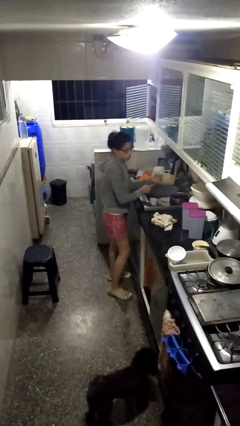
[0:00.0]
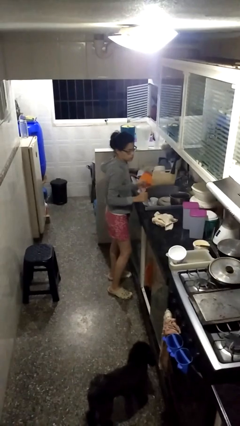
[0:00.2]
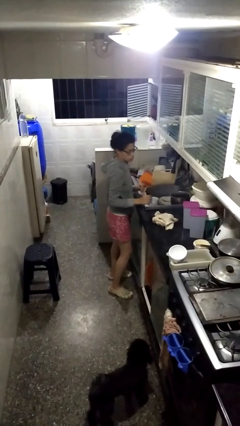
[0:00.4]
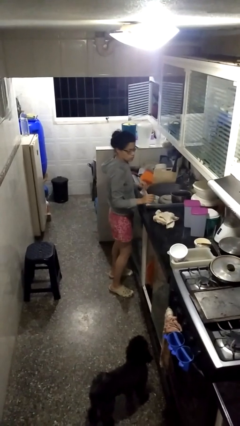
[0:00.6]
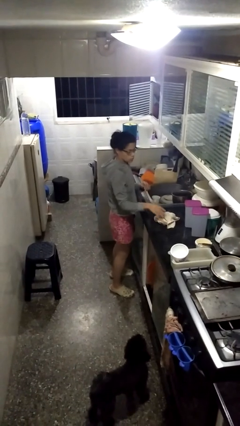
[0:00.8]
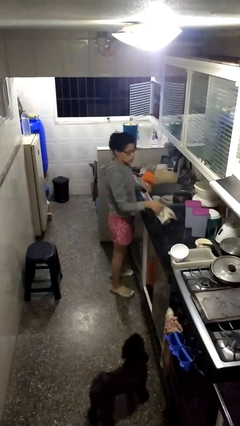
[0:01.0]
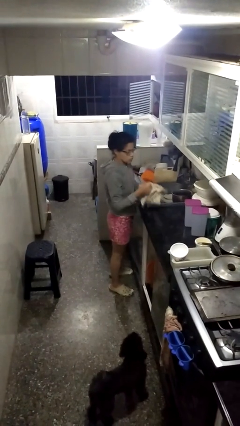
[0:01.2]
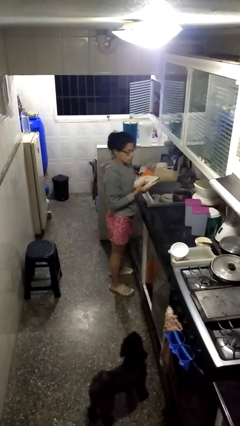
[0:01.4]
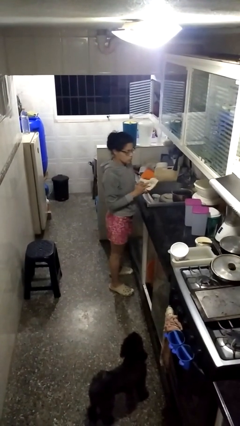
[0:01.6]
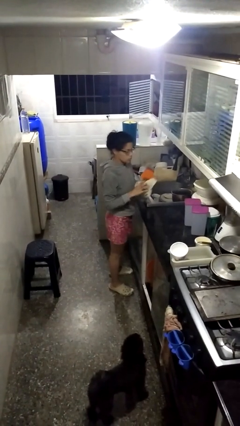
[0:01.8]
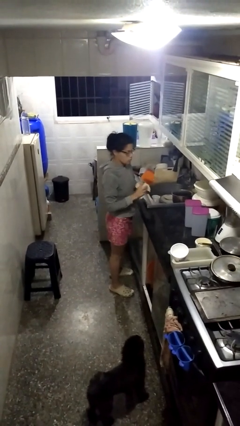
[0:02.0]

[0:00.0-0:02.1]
person dries hands with towel

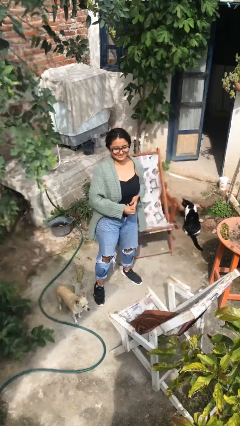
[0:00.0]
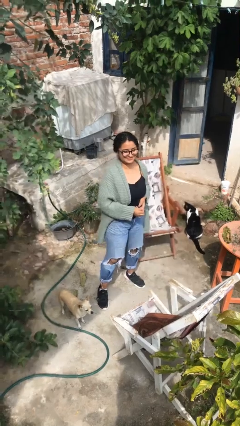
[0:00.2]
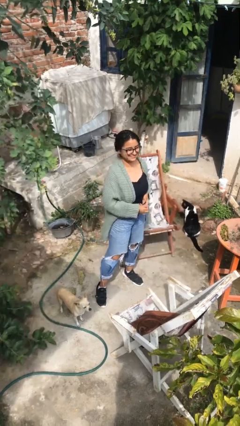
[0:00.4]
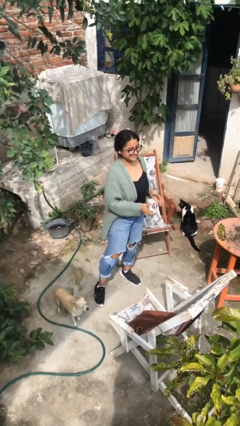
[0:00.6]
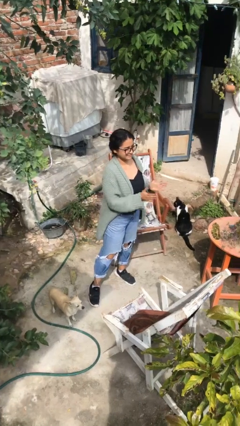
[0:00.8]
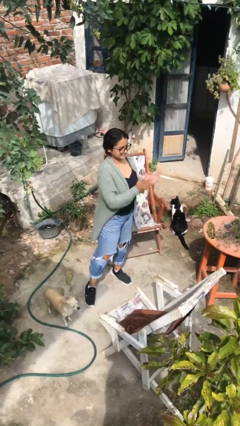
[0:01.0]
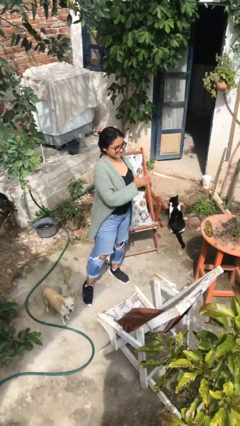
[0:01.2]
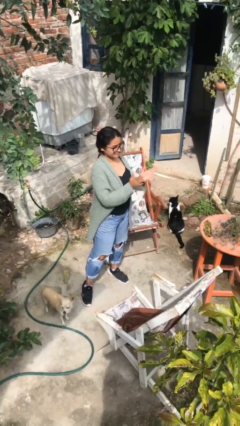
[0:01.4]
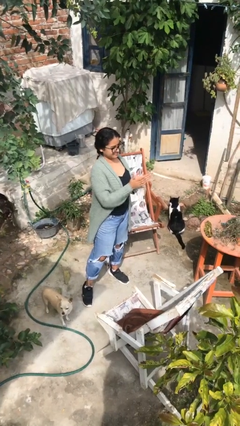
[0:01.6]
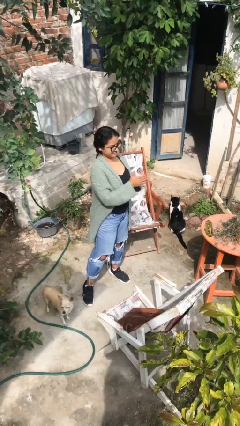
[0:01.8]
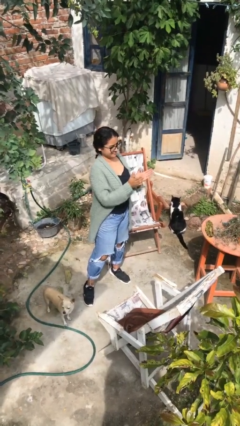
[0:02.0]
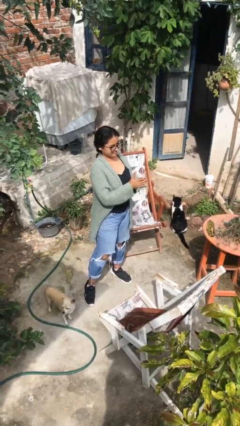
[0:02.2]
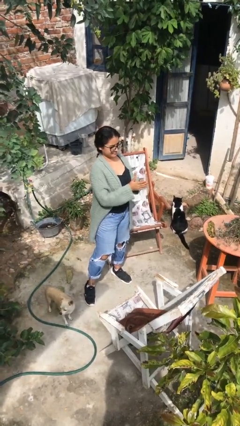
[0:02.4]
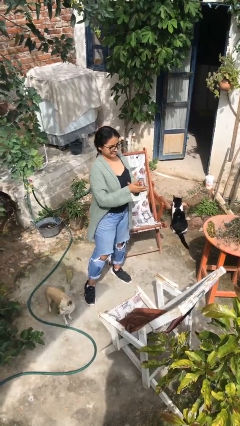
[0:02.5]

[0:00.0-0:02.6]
person claps hands

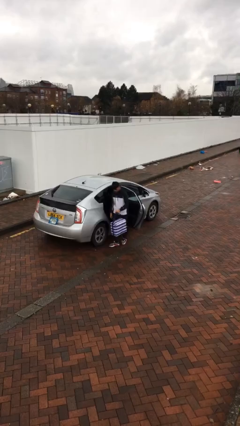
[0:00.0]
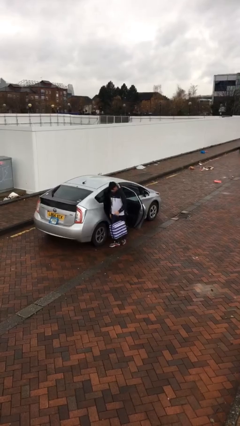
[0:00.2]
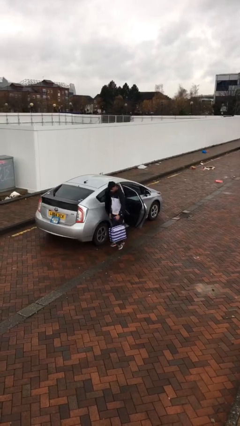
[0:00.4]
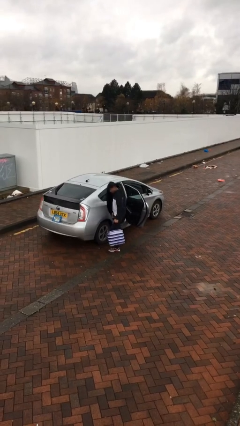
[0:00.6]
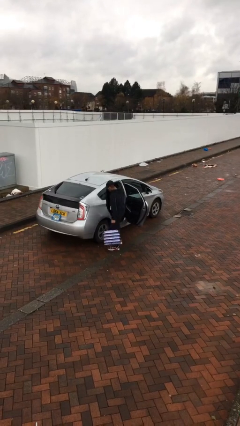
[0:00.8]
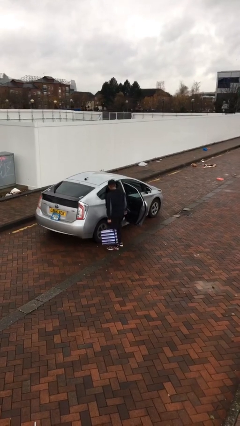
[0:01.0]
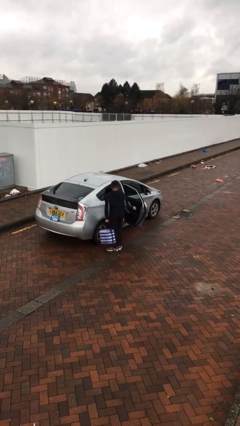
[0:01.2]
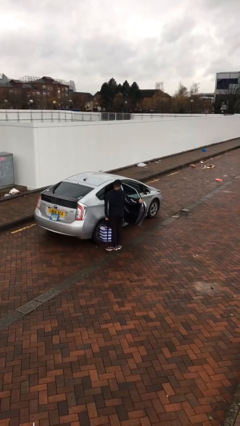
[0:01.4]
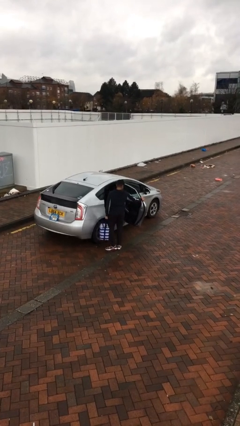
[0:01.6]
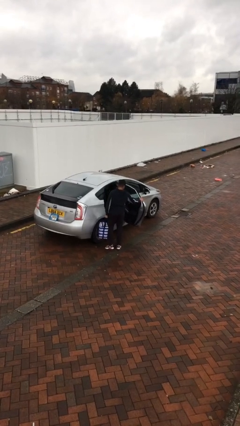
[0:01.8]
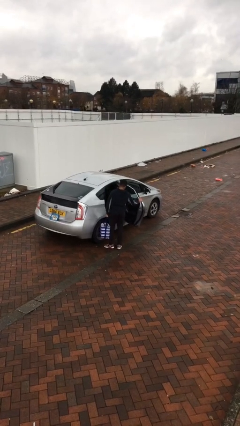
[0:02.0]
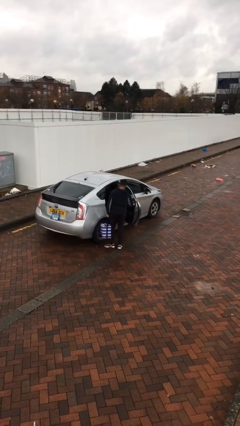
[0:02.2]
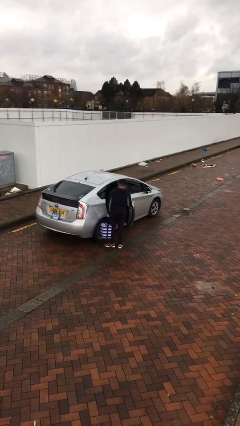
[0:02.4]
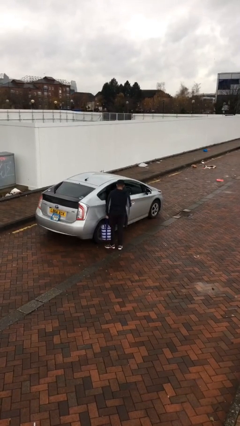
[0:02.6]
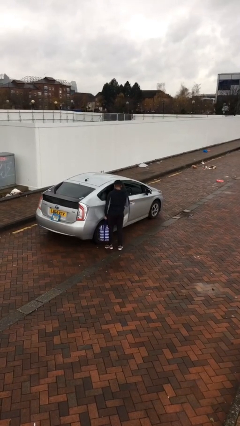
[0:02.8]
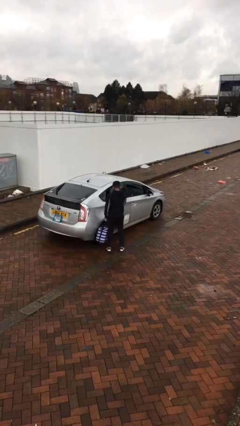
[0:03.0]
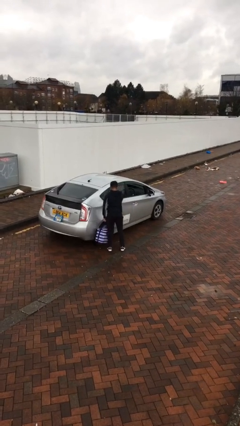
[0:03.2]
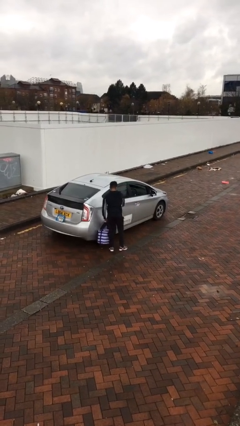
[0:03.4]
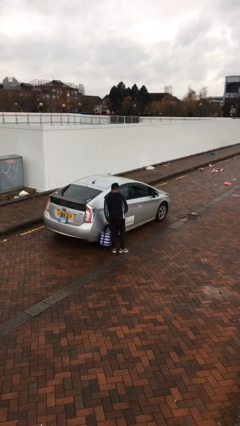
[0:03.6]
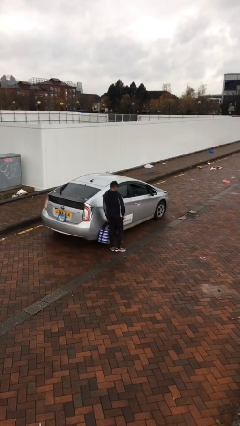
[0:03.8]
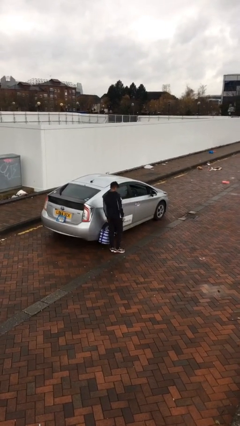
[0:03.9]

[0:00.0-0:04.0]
person closes car door

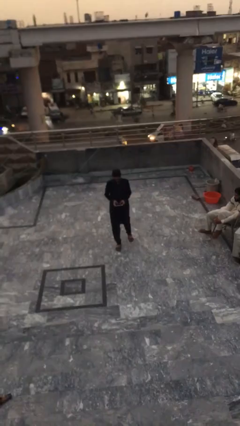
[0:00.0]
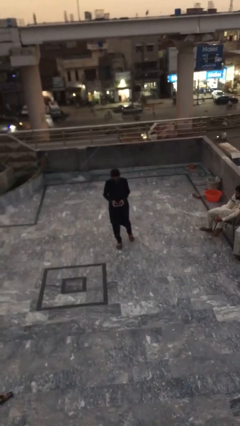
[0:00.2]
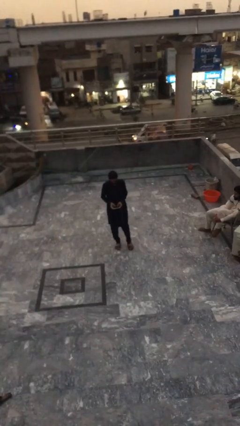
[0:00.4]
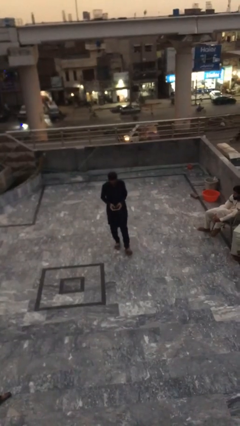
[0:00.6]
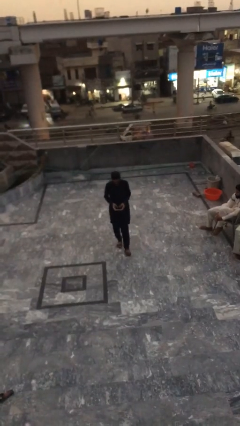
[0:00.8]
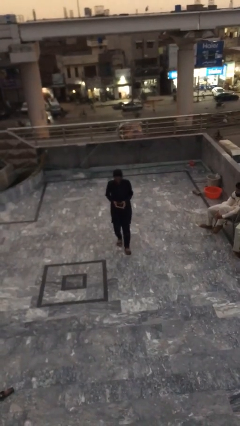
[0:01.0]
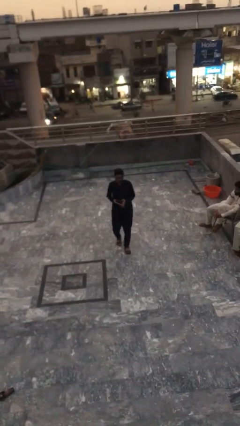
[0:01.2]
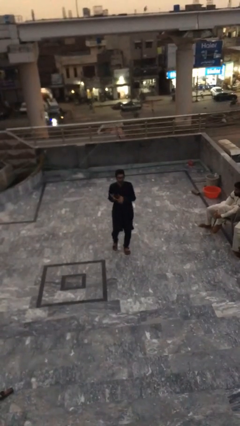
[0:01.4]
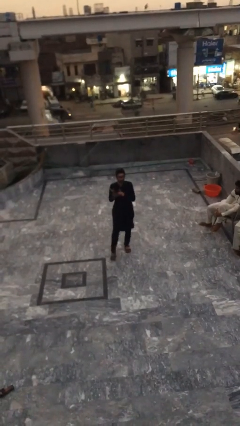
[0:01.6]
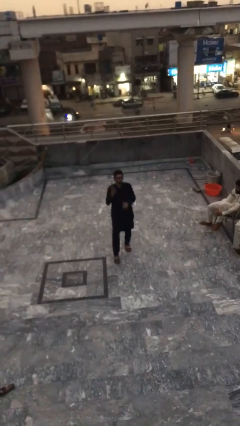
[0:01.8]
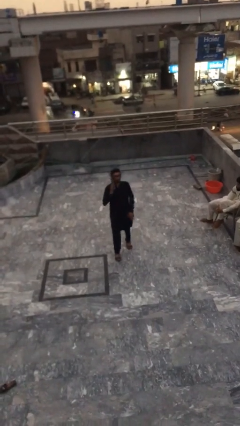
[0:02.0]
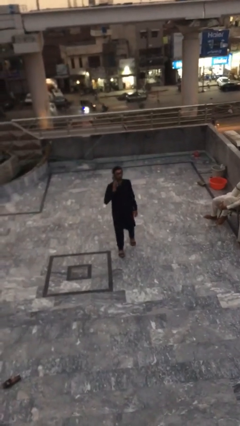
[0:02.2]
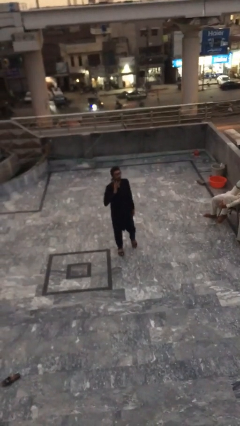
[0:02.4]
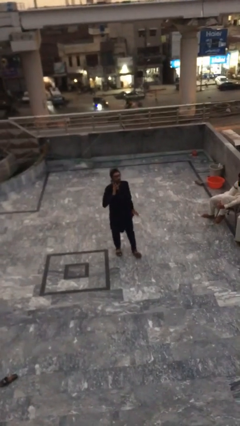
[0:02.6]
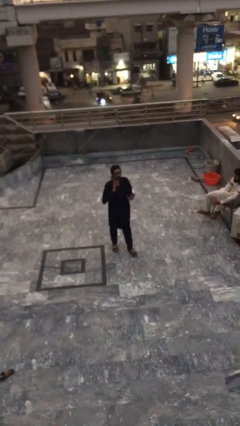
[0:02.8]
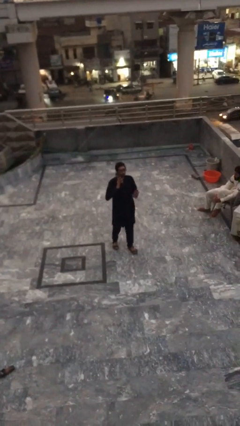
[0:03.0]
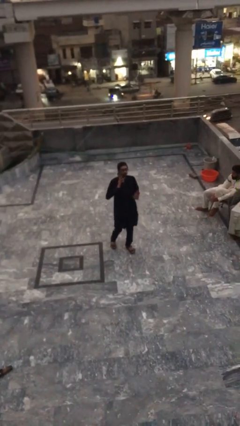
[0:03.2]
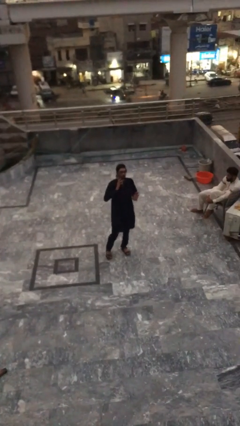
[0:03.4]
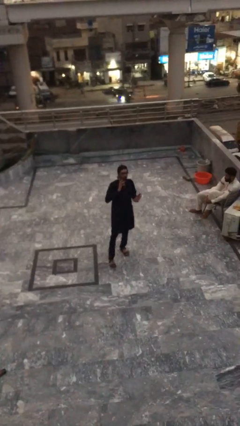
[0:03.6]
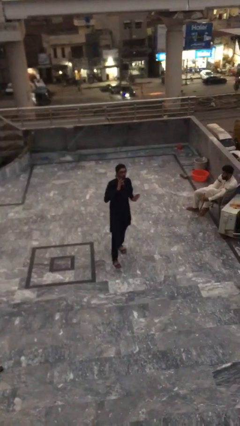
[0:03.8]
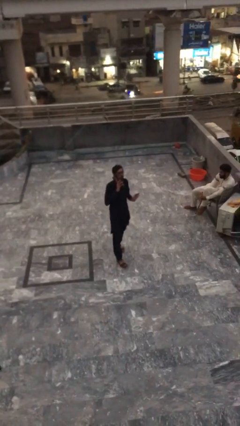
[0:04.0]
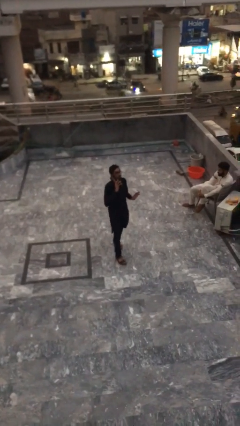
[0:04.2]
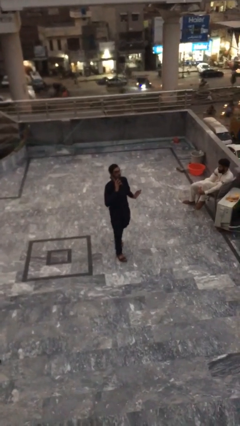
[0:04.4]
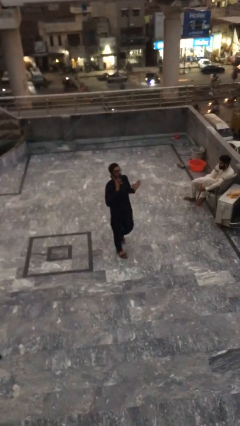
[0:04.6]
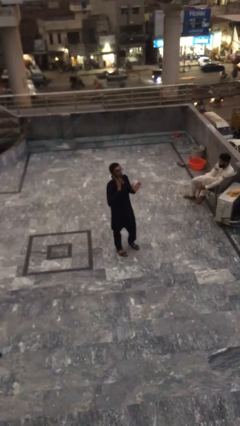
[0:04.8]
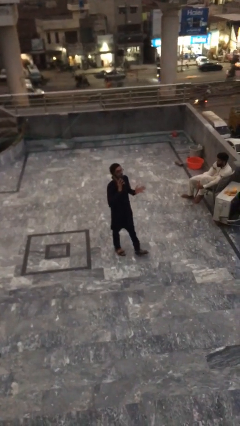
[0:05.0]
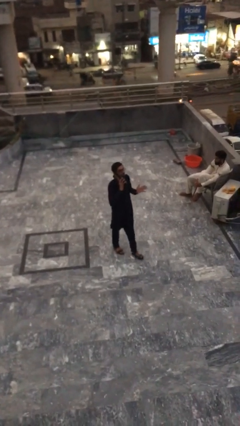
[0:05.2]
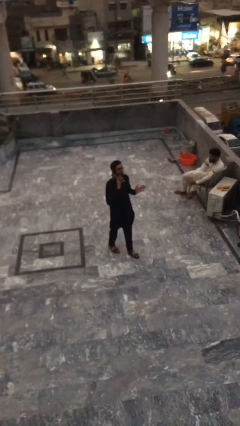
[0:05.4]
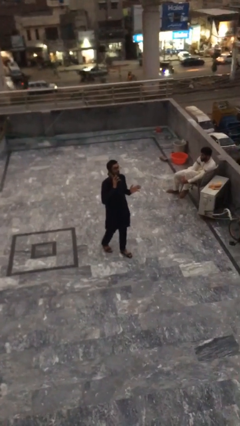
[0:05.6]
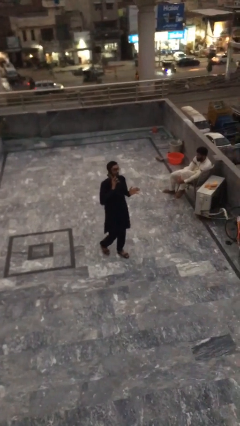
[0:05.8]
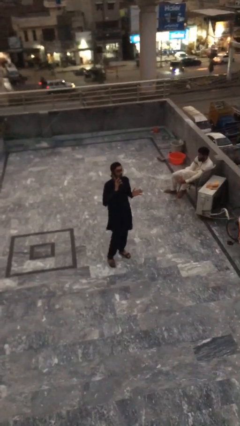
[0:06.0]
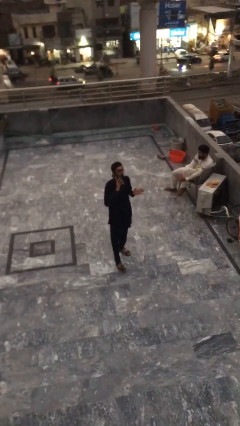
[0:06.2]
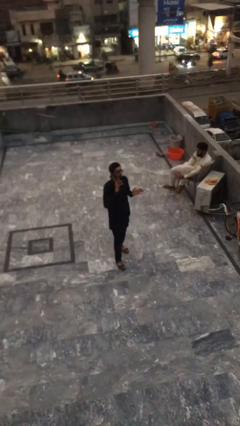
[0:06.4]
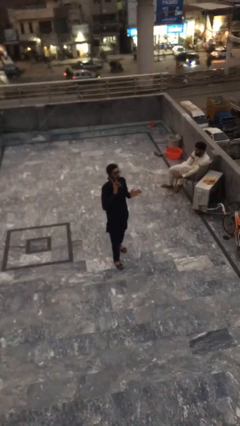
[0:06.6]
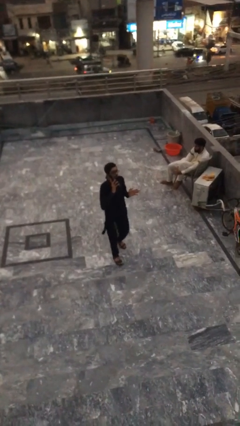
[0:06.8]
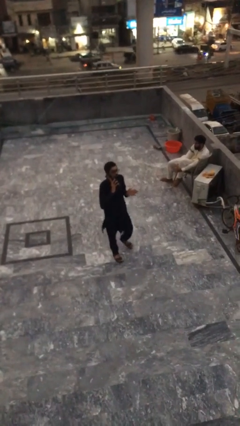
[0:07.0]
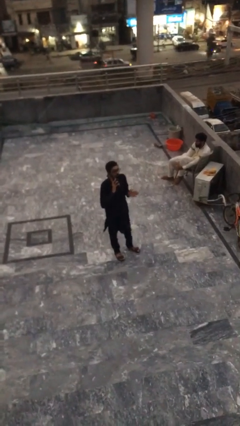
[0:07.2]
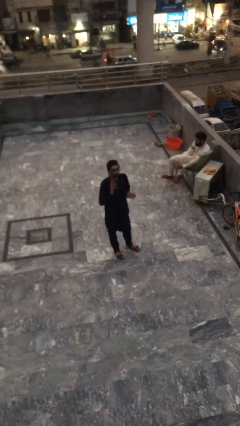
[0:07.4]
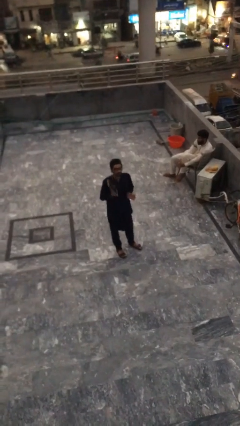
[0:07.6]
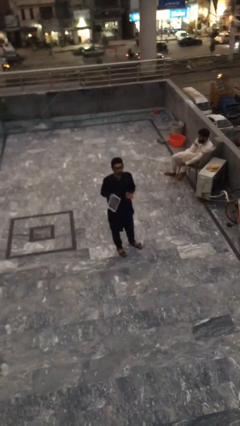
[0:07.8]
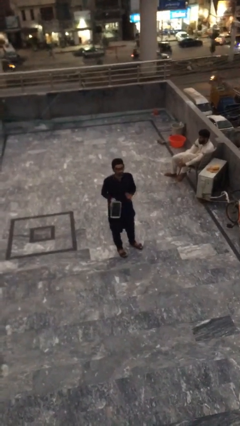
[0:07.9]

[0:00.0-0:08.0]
person talks on phone

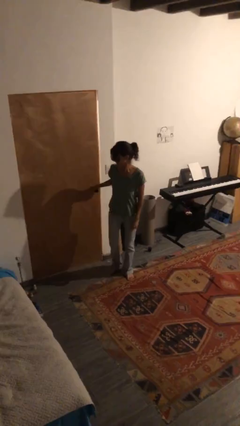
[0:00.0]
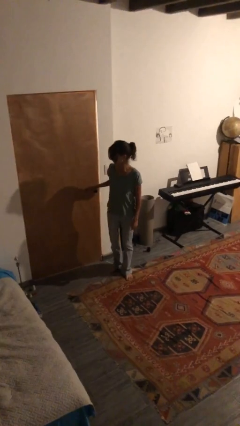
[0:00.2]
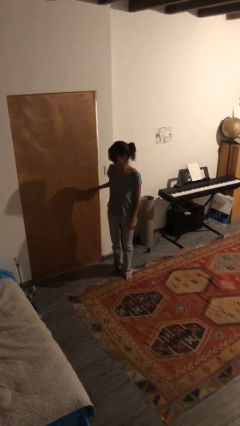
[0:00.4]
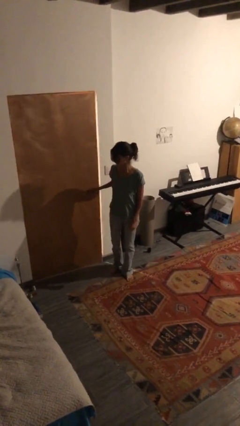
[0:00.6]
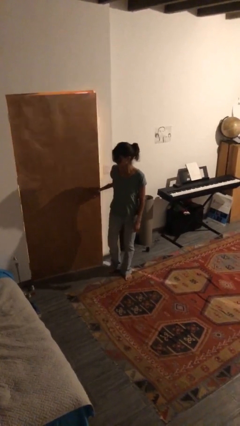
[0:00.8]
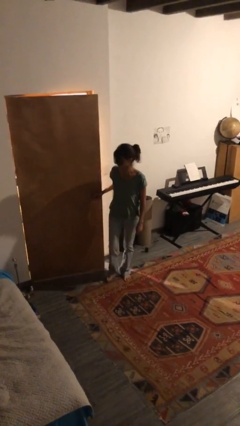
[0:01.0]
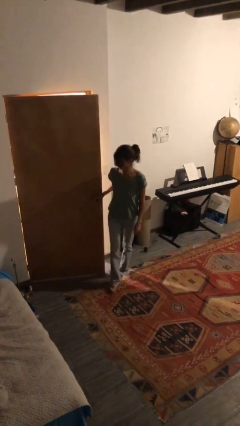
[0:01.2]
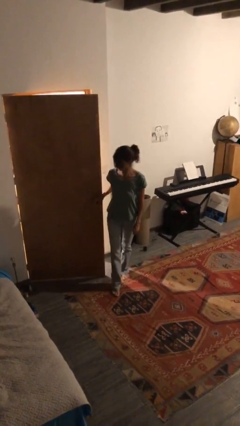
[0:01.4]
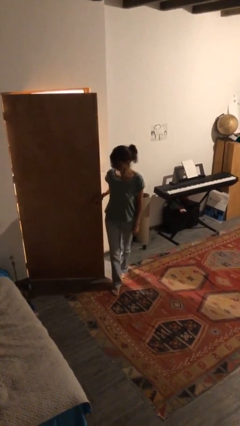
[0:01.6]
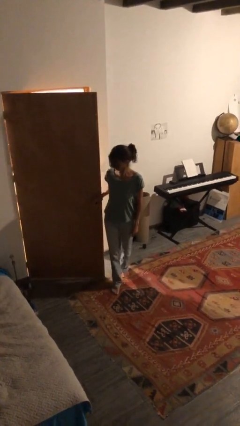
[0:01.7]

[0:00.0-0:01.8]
person opens facility door
